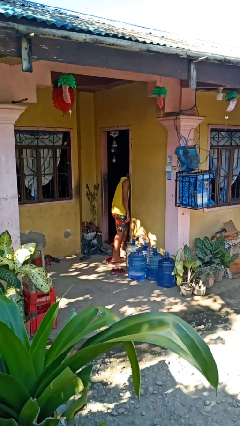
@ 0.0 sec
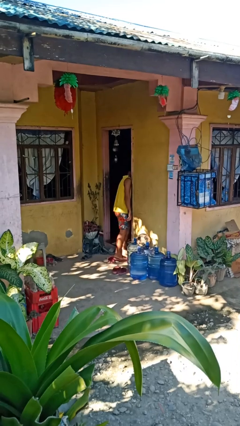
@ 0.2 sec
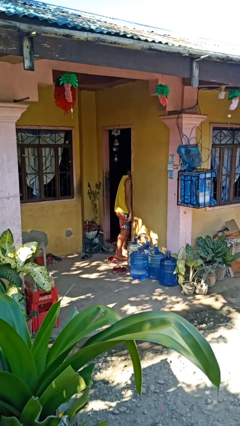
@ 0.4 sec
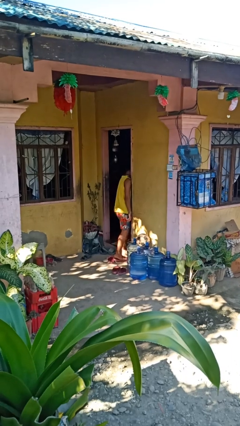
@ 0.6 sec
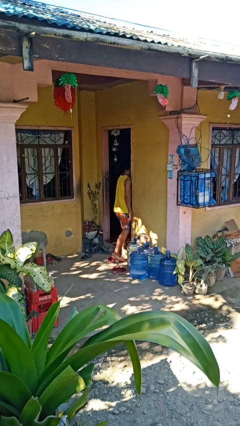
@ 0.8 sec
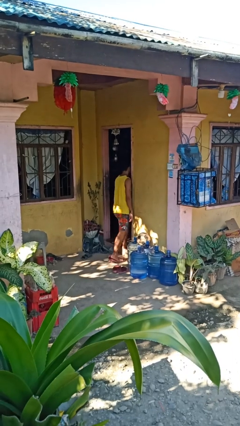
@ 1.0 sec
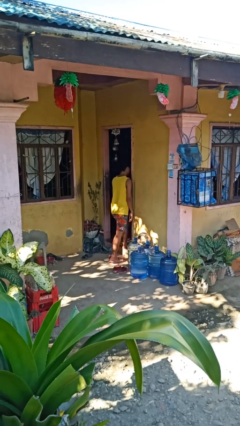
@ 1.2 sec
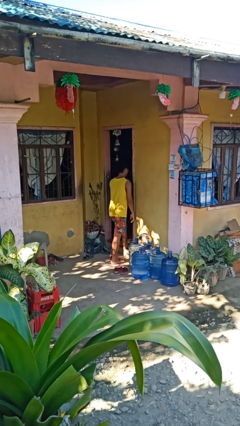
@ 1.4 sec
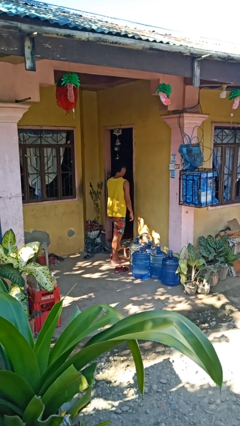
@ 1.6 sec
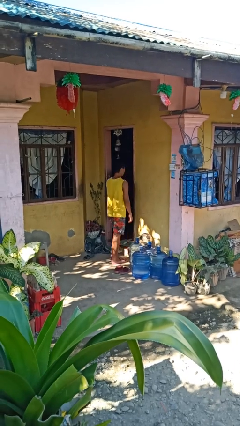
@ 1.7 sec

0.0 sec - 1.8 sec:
person bumps into wall

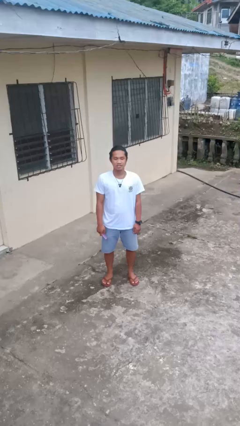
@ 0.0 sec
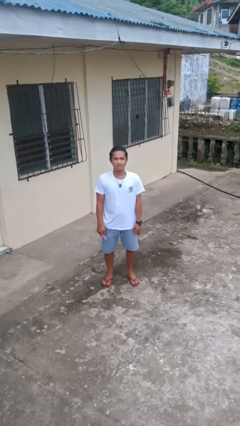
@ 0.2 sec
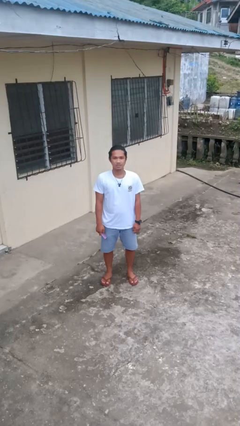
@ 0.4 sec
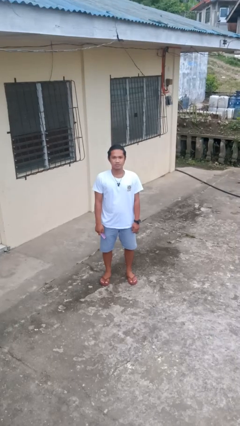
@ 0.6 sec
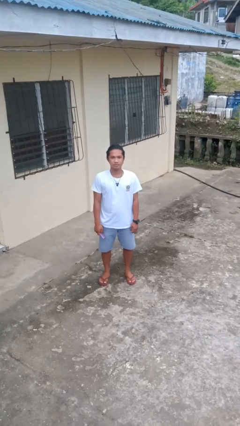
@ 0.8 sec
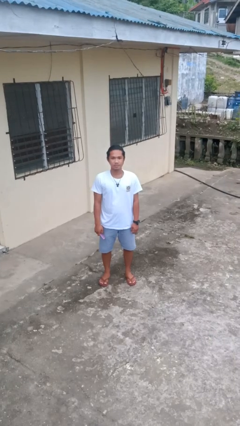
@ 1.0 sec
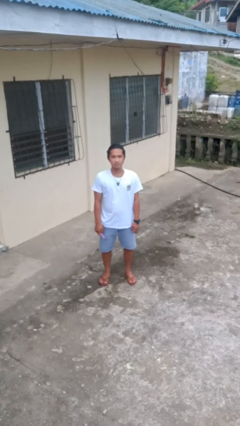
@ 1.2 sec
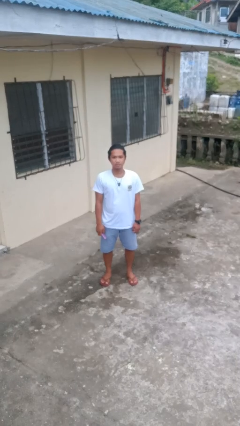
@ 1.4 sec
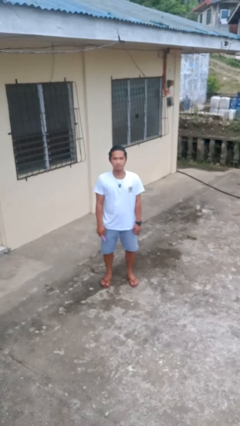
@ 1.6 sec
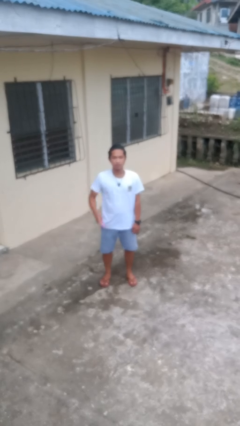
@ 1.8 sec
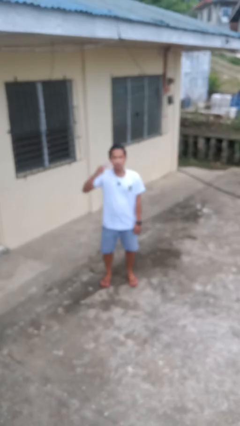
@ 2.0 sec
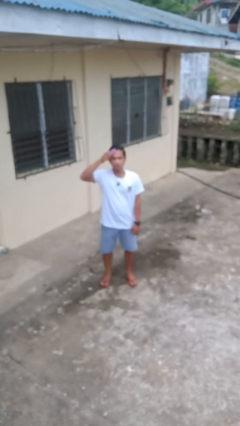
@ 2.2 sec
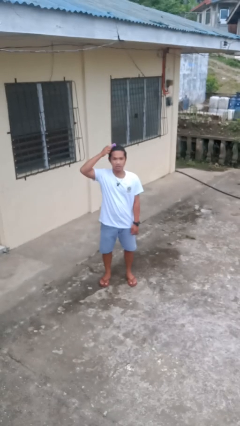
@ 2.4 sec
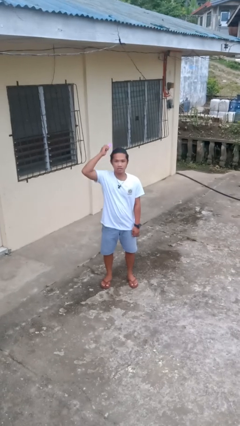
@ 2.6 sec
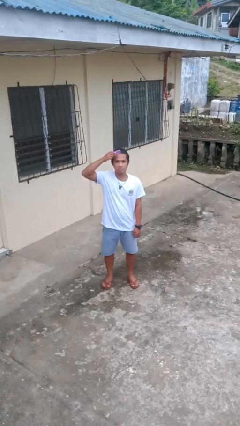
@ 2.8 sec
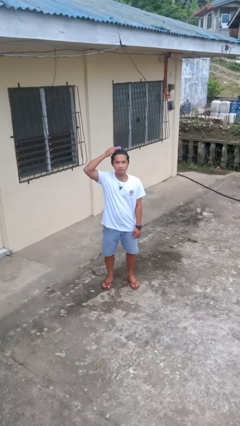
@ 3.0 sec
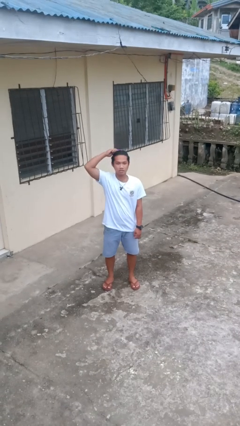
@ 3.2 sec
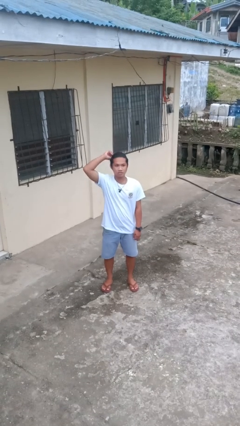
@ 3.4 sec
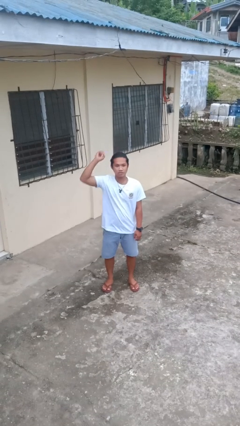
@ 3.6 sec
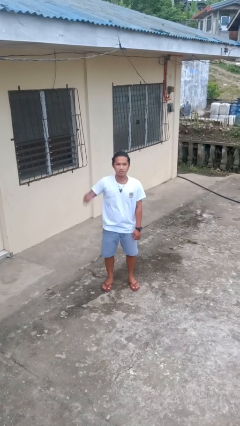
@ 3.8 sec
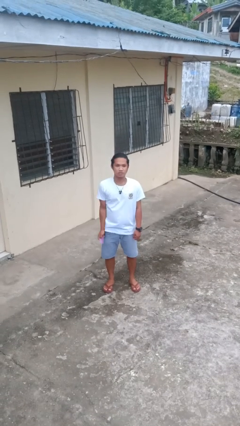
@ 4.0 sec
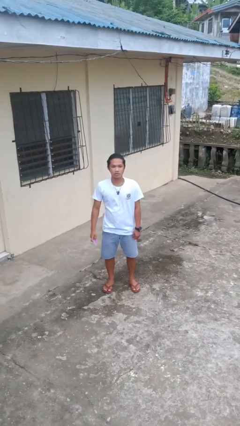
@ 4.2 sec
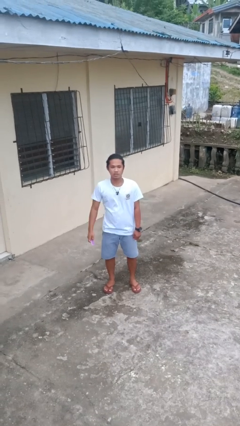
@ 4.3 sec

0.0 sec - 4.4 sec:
person brushes hair

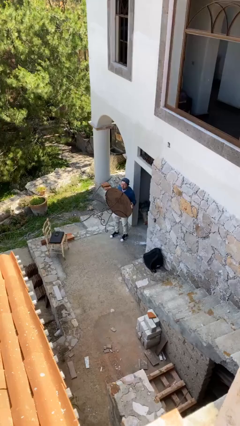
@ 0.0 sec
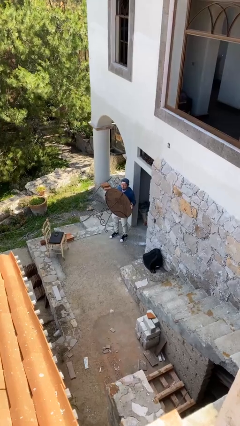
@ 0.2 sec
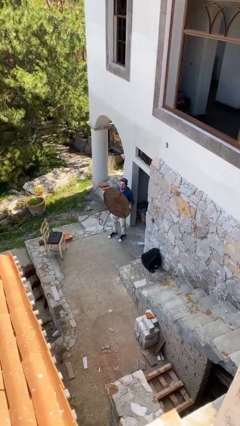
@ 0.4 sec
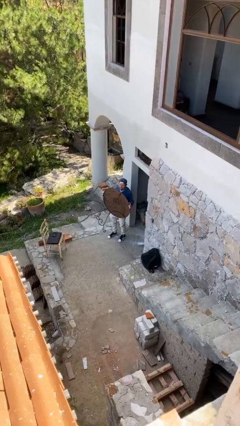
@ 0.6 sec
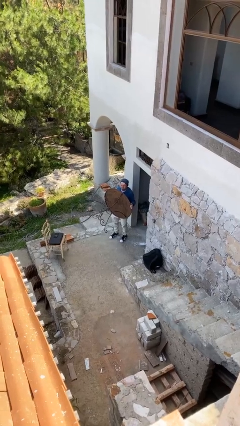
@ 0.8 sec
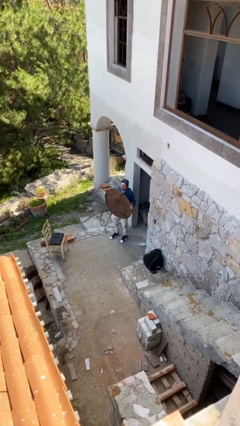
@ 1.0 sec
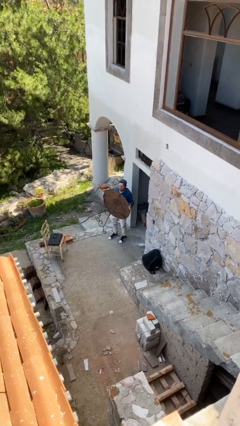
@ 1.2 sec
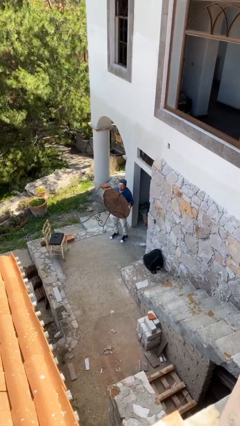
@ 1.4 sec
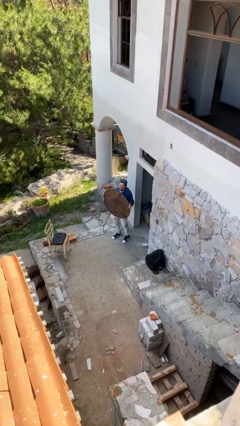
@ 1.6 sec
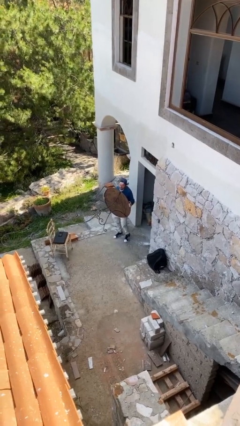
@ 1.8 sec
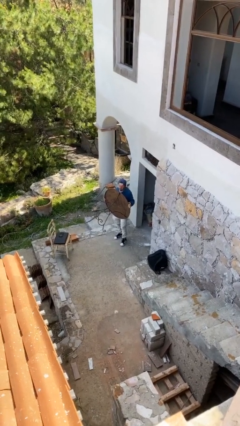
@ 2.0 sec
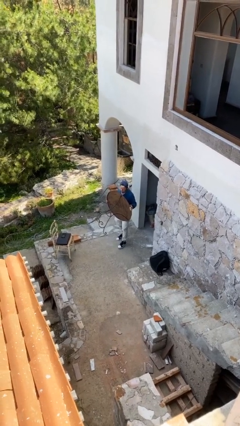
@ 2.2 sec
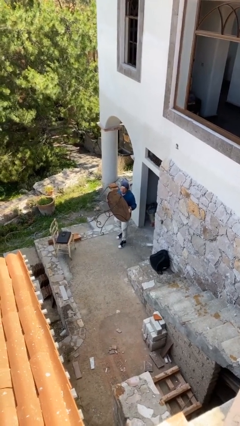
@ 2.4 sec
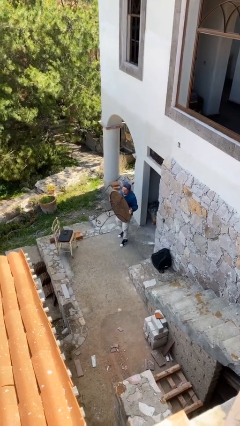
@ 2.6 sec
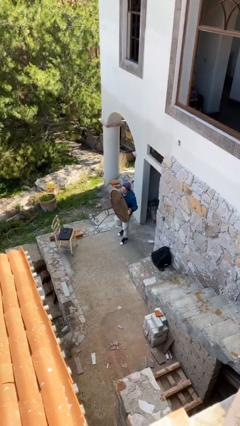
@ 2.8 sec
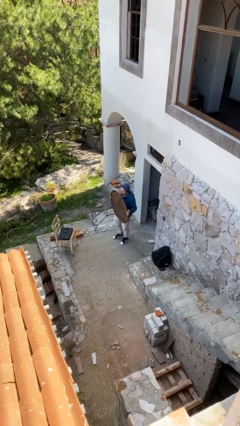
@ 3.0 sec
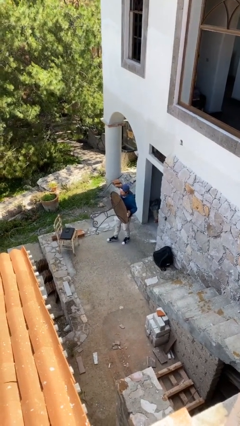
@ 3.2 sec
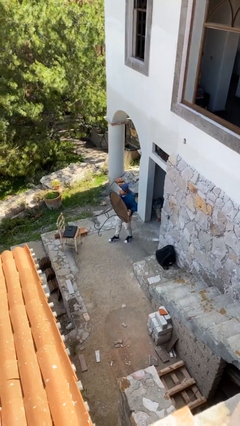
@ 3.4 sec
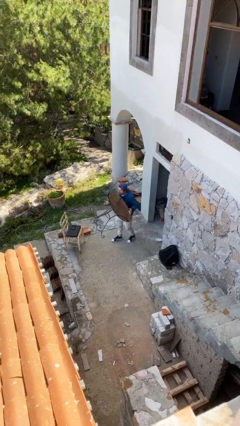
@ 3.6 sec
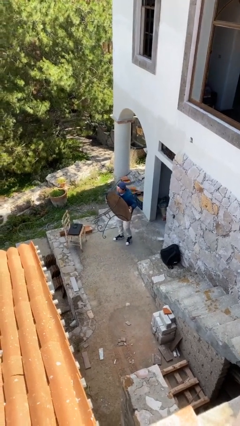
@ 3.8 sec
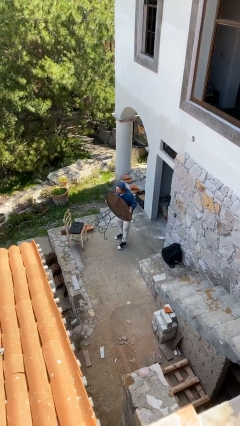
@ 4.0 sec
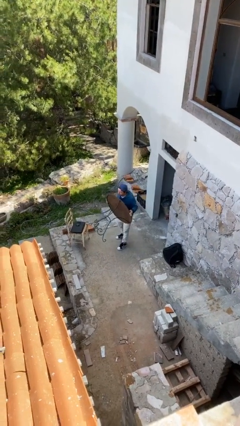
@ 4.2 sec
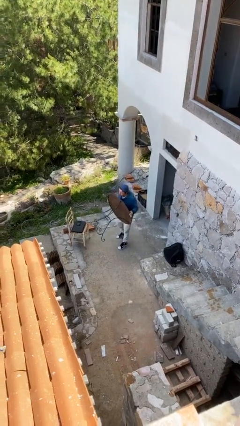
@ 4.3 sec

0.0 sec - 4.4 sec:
person carries heavy object

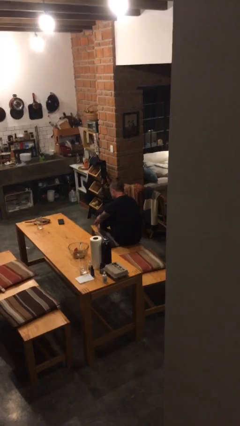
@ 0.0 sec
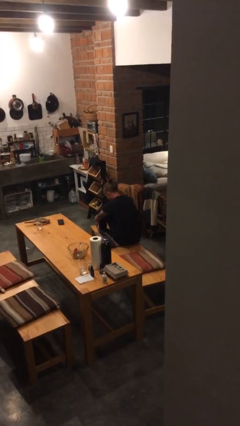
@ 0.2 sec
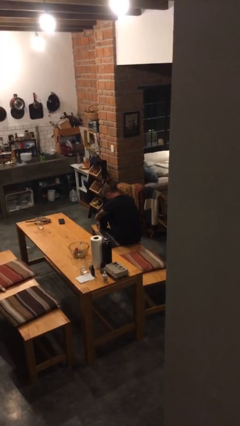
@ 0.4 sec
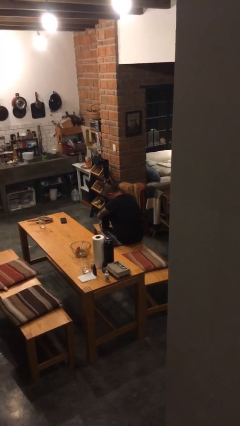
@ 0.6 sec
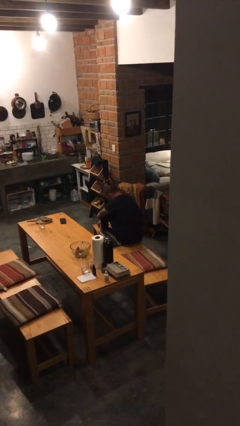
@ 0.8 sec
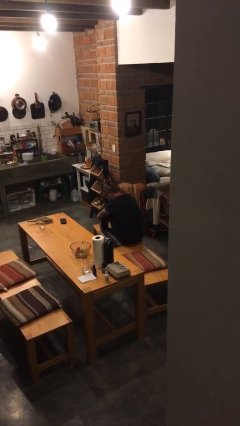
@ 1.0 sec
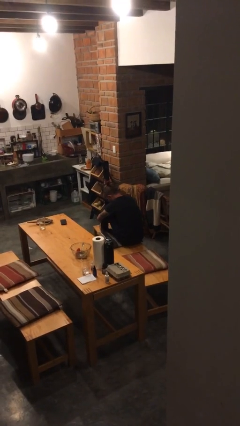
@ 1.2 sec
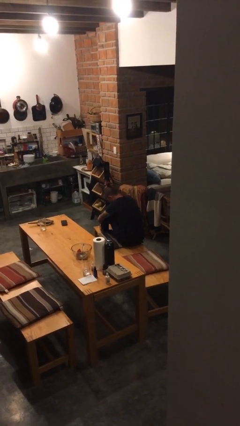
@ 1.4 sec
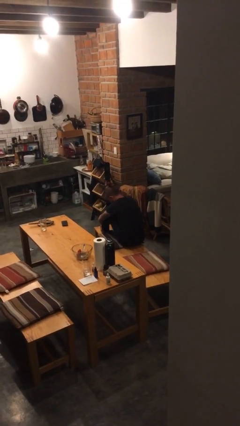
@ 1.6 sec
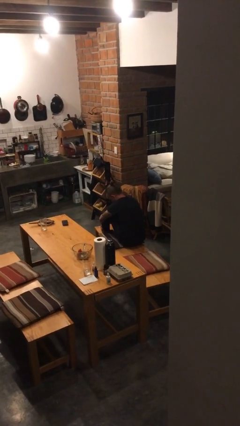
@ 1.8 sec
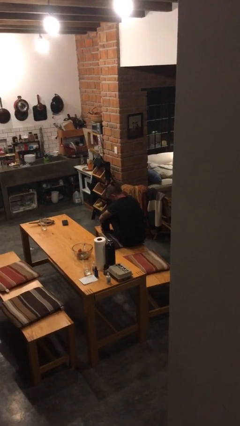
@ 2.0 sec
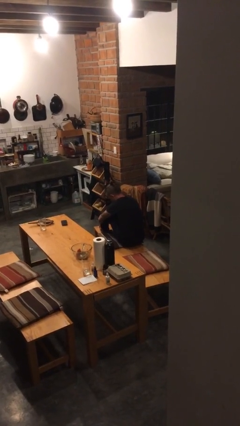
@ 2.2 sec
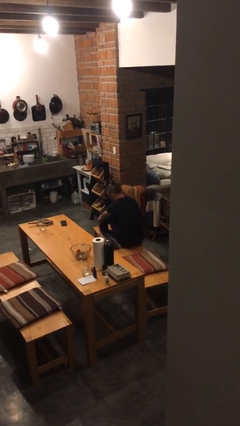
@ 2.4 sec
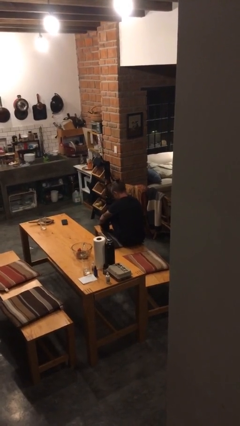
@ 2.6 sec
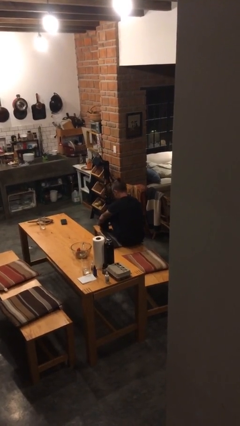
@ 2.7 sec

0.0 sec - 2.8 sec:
person rubs foot

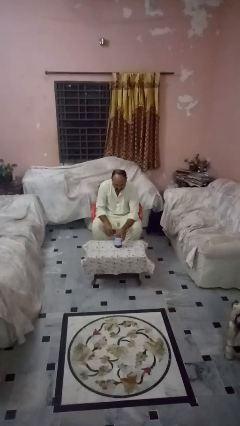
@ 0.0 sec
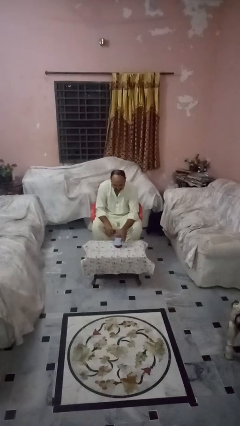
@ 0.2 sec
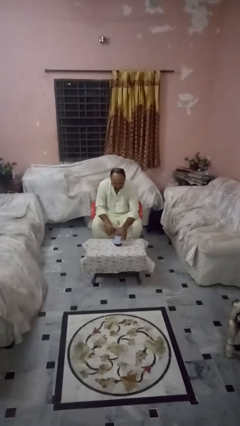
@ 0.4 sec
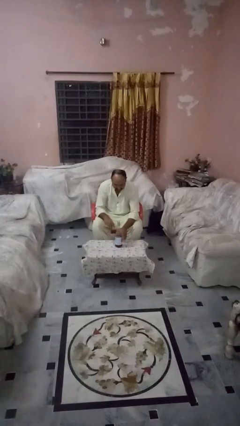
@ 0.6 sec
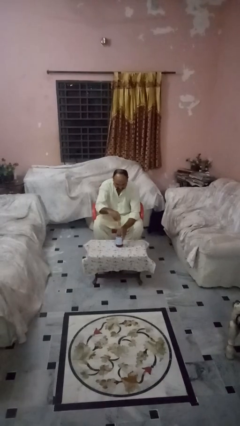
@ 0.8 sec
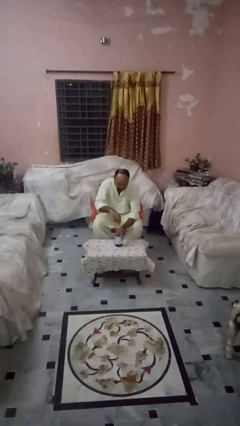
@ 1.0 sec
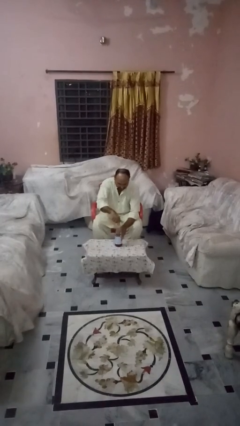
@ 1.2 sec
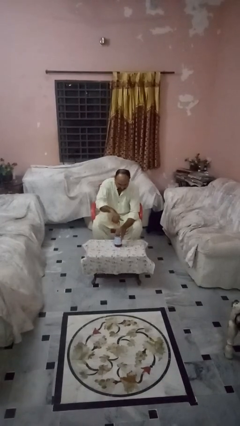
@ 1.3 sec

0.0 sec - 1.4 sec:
person screws lid to bottle

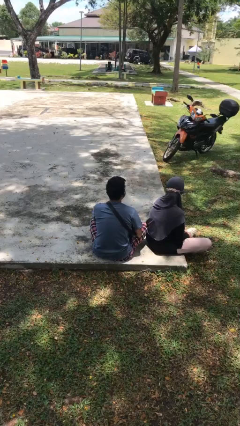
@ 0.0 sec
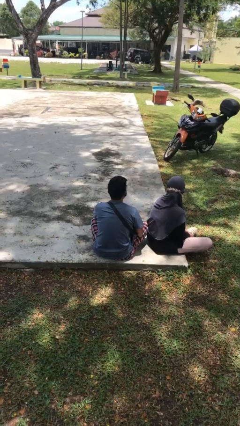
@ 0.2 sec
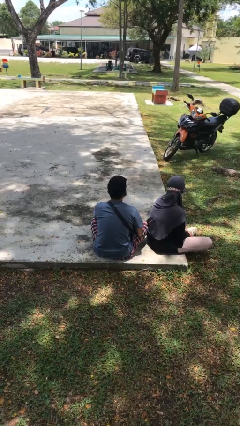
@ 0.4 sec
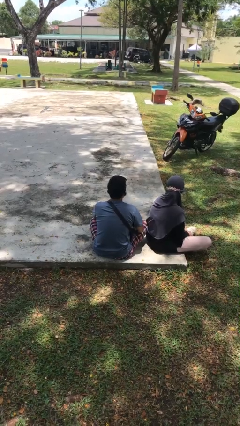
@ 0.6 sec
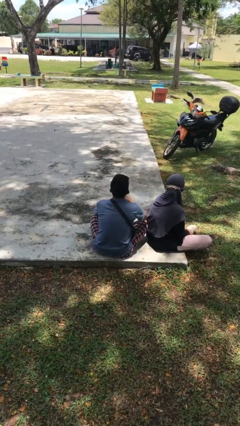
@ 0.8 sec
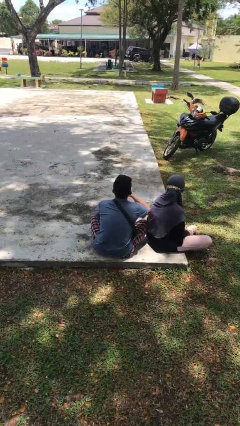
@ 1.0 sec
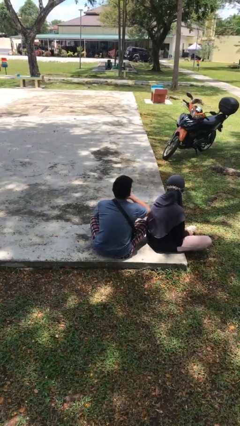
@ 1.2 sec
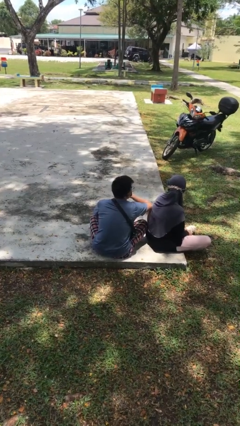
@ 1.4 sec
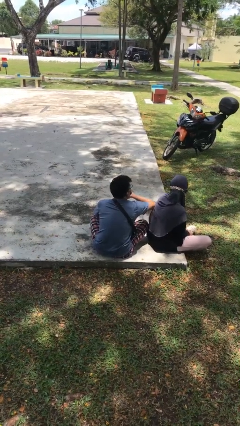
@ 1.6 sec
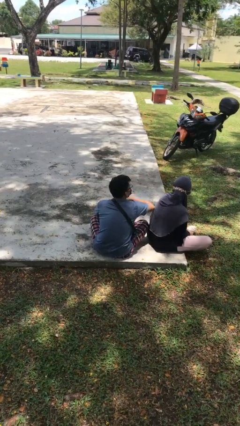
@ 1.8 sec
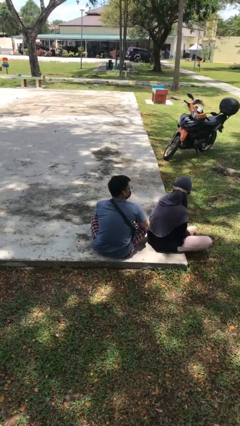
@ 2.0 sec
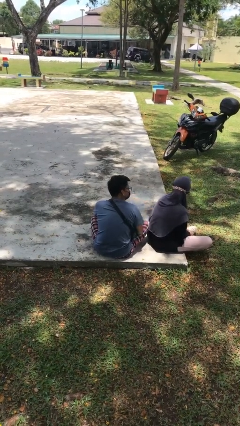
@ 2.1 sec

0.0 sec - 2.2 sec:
person nudges person with elbow

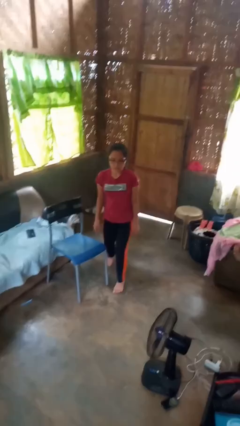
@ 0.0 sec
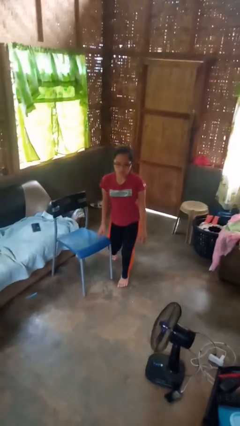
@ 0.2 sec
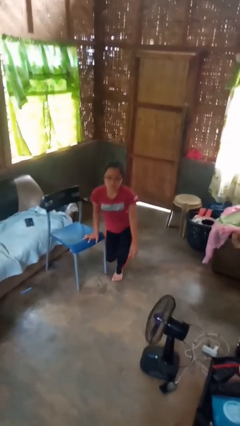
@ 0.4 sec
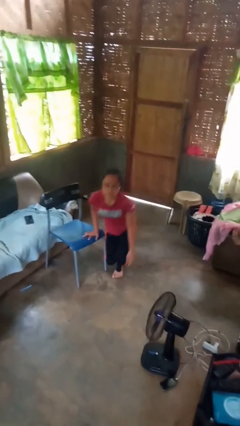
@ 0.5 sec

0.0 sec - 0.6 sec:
person trips on object on floor
